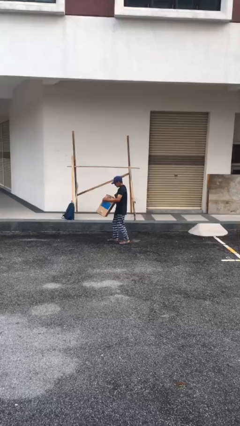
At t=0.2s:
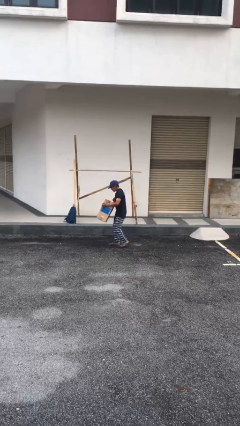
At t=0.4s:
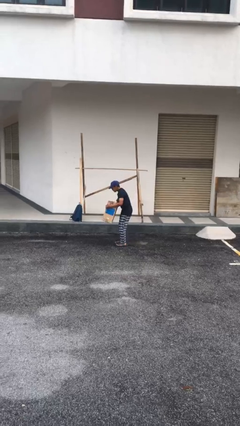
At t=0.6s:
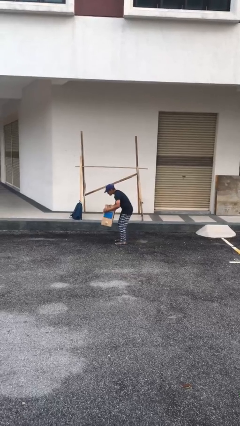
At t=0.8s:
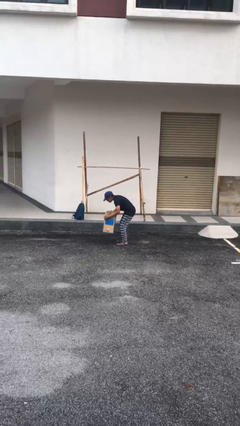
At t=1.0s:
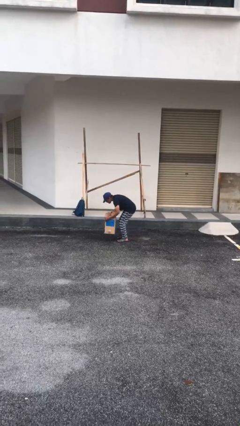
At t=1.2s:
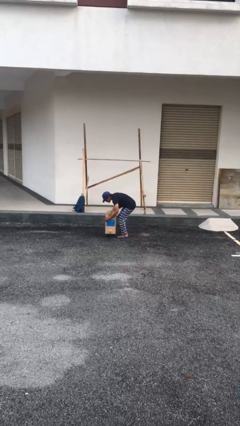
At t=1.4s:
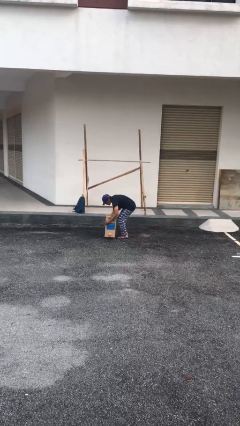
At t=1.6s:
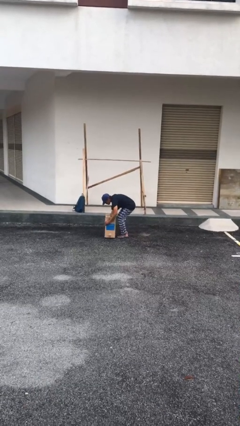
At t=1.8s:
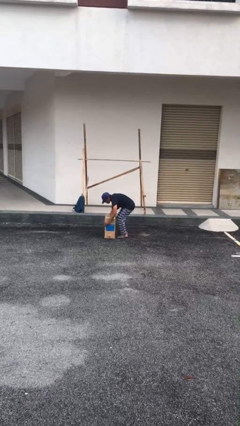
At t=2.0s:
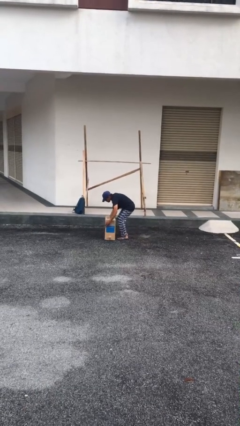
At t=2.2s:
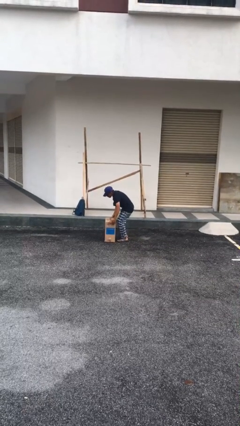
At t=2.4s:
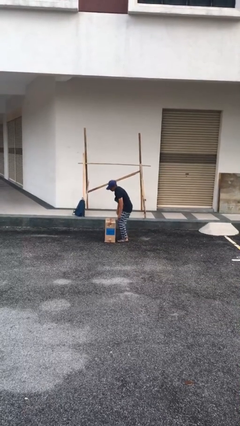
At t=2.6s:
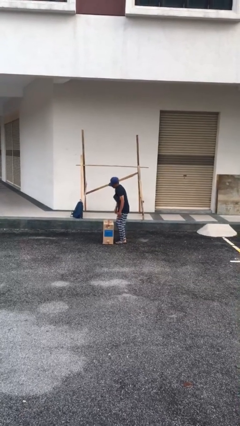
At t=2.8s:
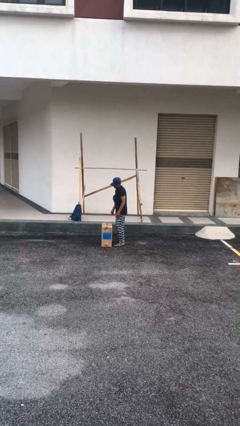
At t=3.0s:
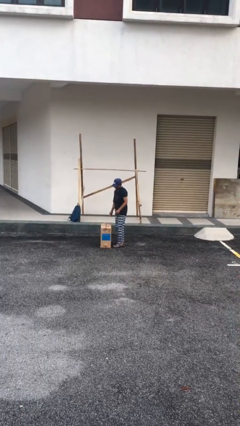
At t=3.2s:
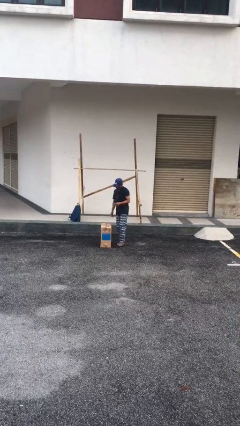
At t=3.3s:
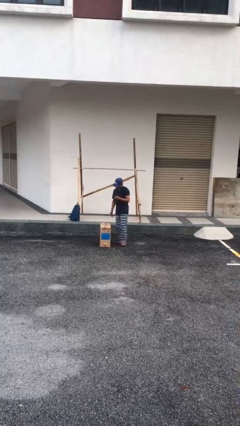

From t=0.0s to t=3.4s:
person puts down object on floor

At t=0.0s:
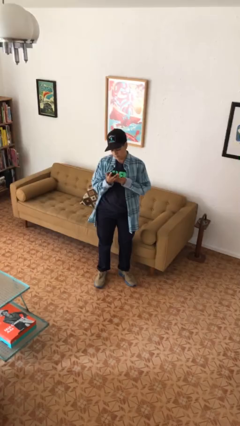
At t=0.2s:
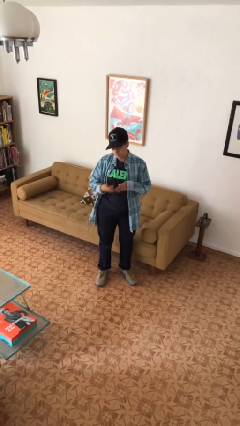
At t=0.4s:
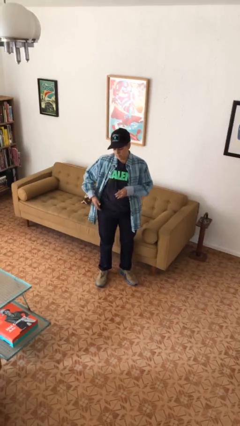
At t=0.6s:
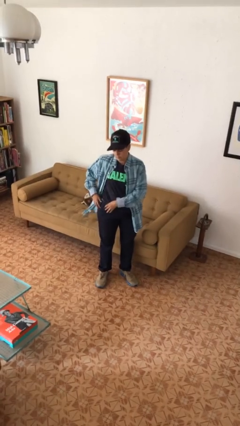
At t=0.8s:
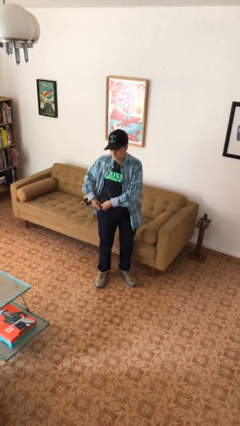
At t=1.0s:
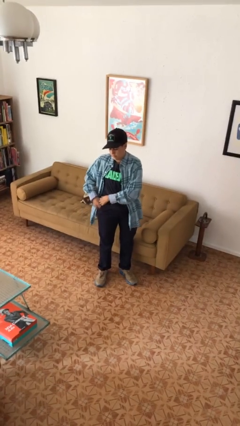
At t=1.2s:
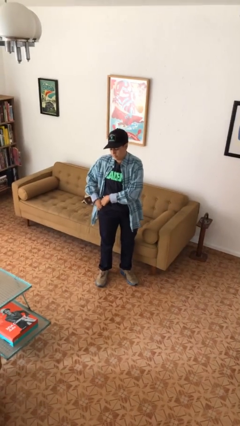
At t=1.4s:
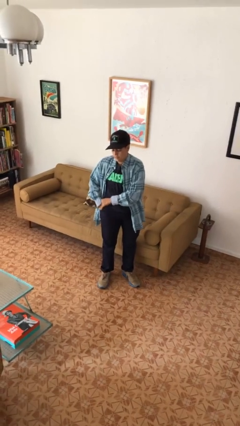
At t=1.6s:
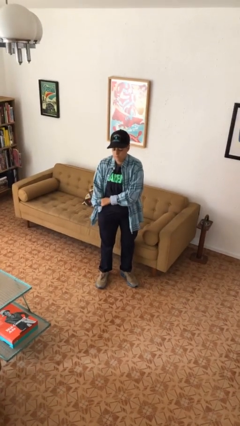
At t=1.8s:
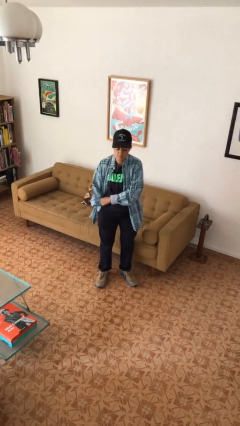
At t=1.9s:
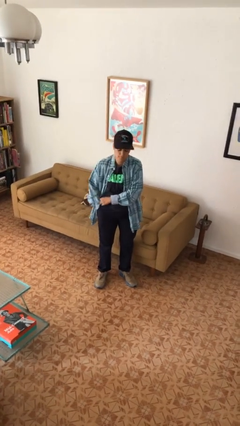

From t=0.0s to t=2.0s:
person puts phone into pocket

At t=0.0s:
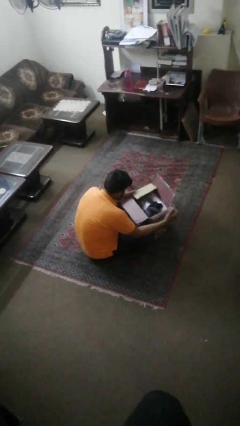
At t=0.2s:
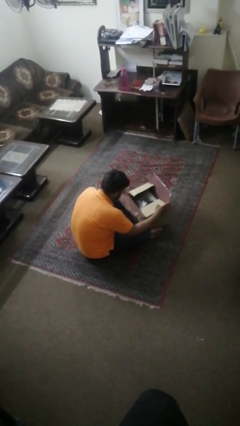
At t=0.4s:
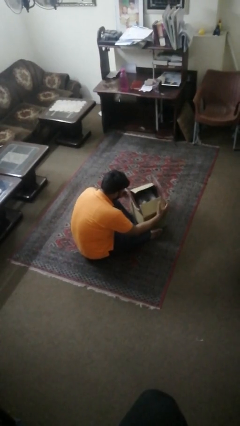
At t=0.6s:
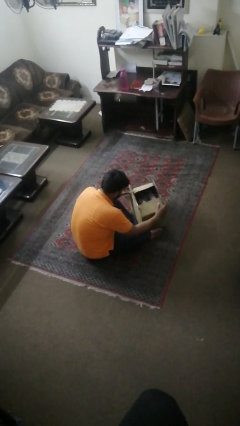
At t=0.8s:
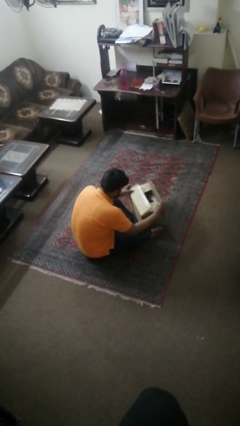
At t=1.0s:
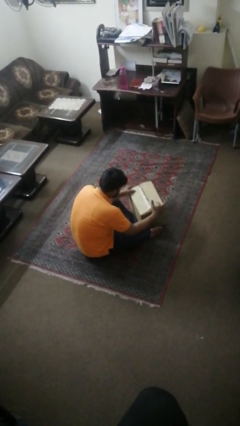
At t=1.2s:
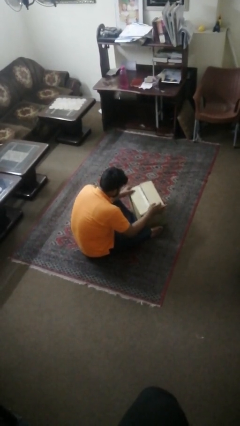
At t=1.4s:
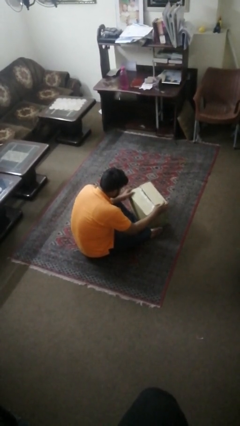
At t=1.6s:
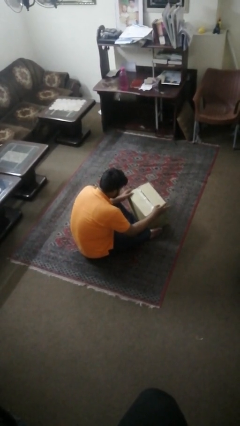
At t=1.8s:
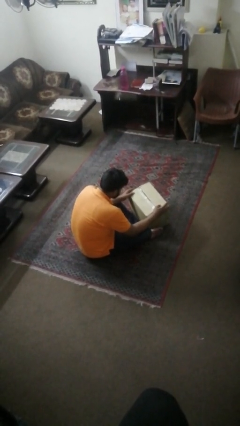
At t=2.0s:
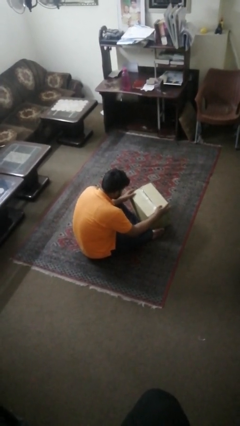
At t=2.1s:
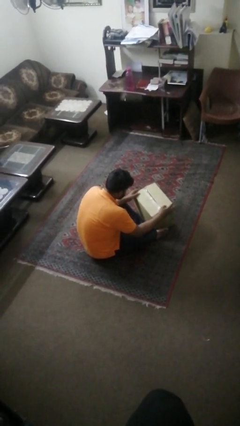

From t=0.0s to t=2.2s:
person closes box

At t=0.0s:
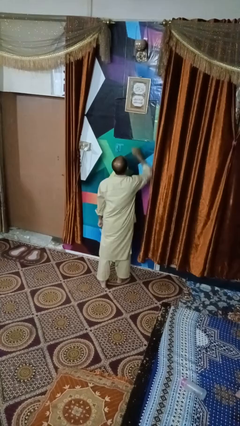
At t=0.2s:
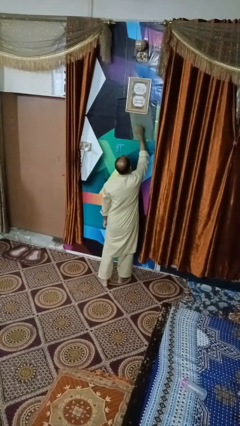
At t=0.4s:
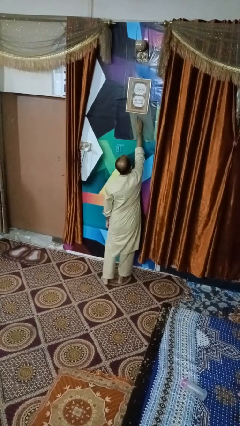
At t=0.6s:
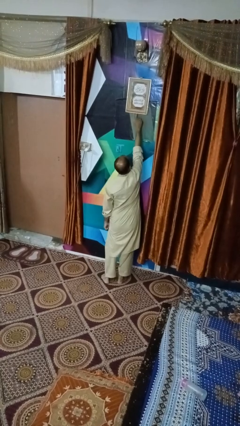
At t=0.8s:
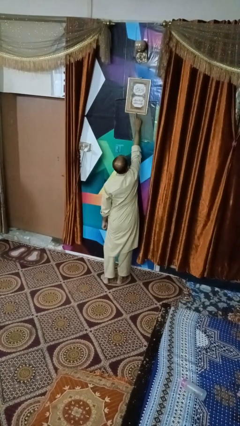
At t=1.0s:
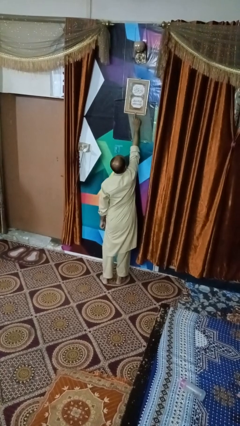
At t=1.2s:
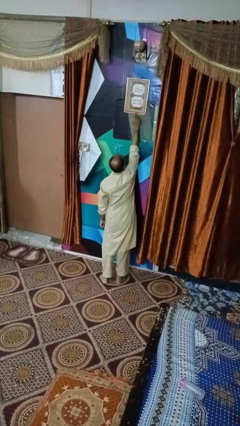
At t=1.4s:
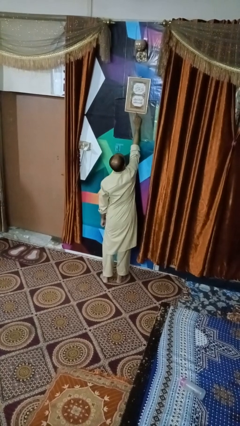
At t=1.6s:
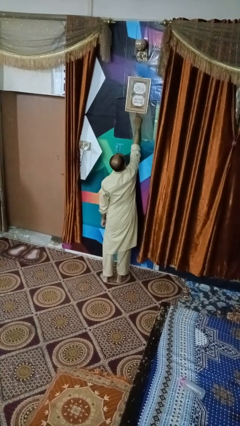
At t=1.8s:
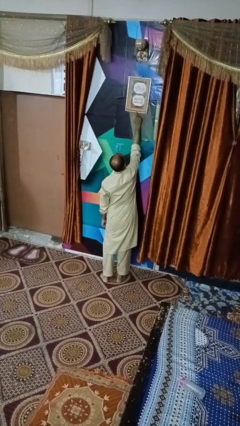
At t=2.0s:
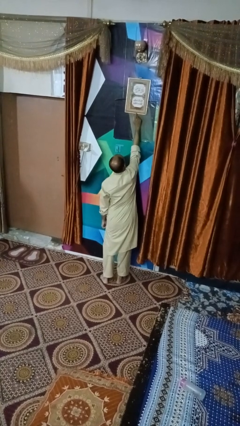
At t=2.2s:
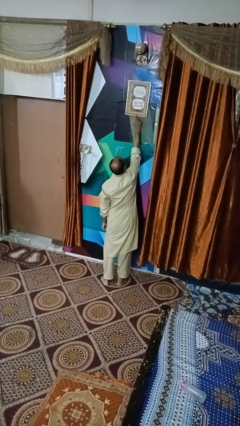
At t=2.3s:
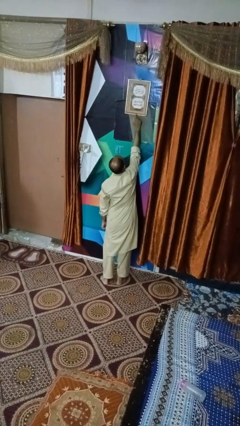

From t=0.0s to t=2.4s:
person taps object with finger

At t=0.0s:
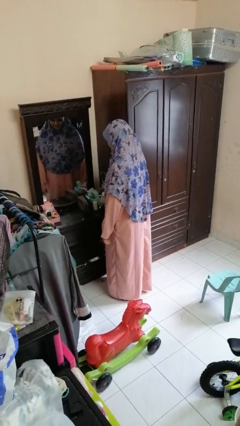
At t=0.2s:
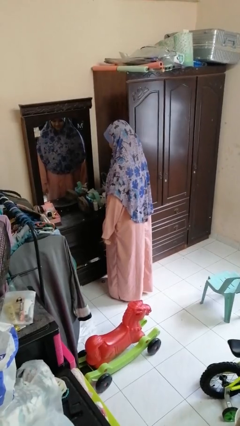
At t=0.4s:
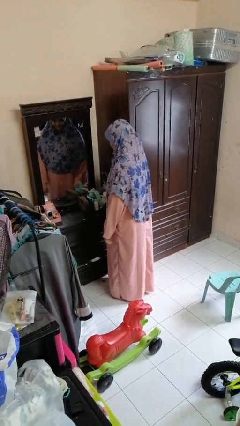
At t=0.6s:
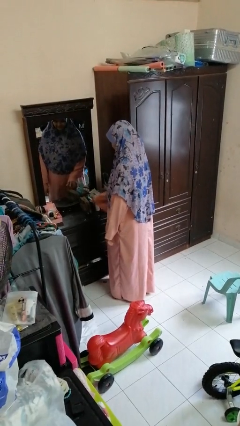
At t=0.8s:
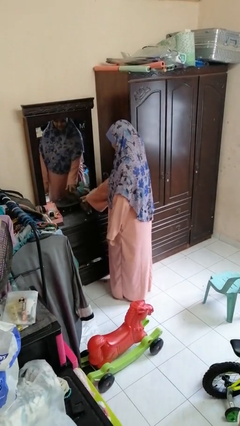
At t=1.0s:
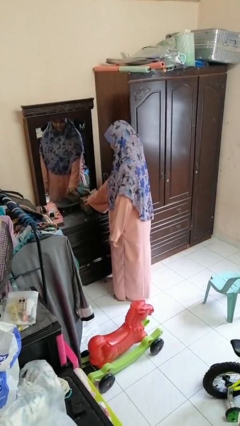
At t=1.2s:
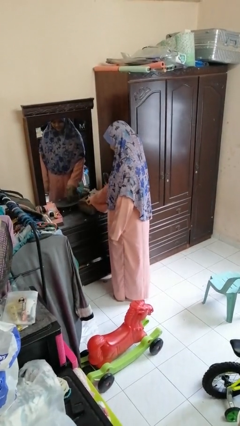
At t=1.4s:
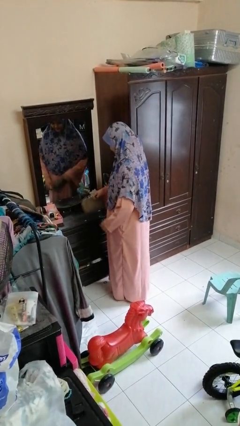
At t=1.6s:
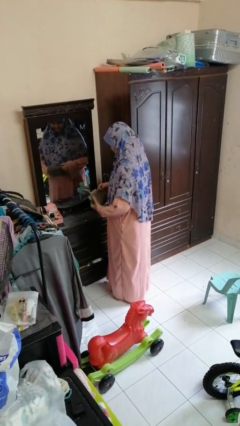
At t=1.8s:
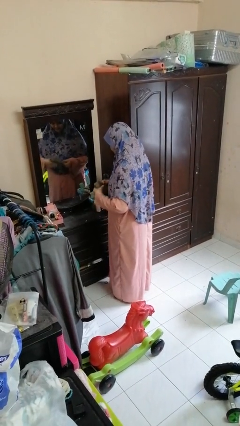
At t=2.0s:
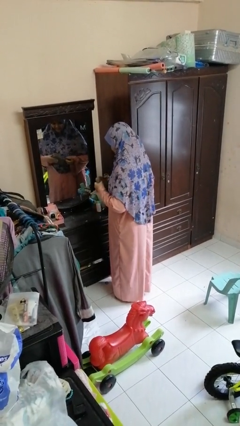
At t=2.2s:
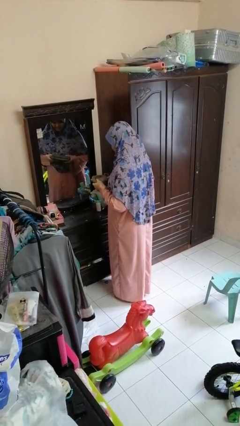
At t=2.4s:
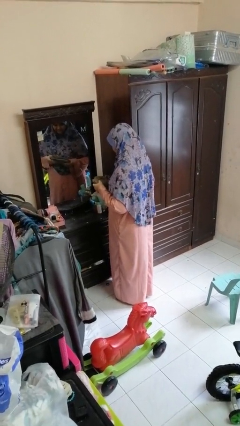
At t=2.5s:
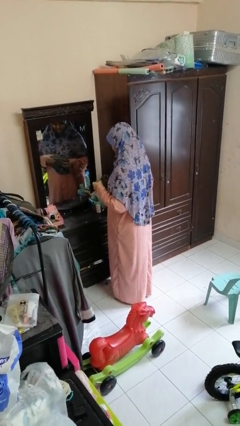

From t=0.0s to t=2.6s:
person picks up object from countertop

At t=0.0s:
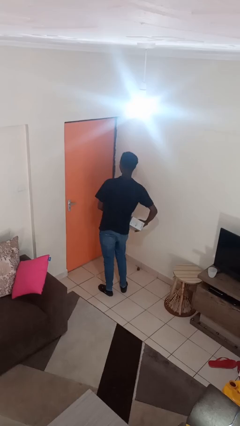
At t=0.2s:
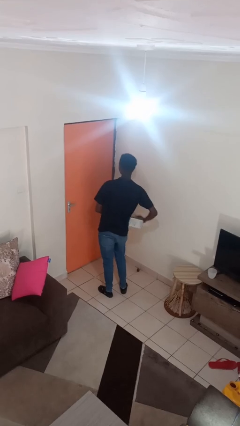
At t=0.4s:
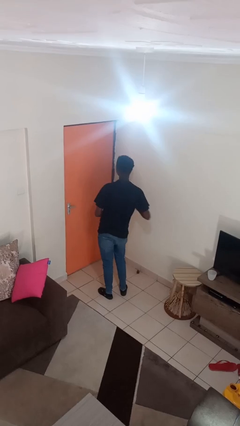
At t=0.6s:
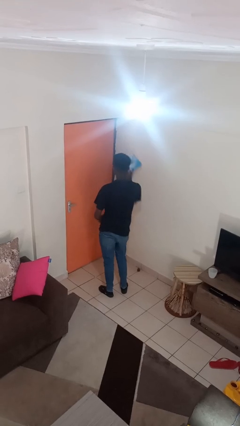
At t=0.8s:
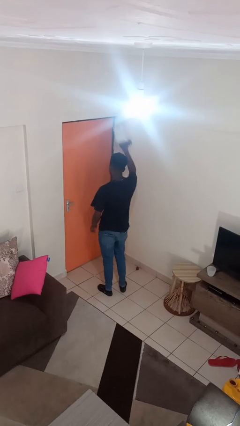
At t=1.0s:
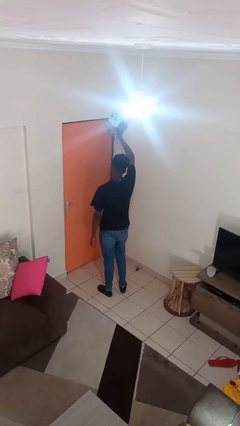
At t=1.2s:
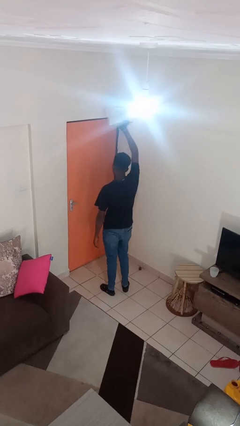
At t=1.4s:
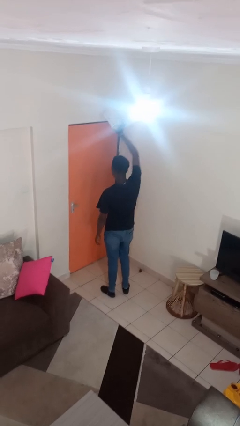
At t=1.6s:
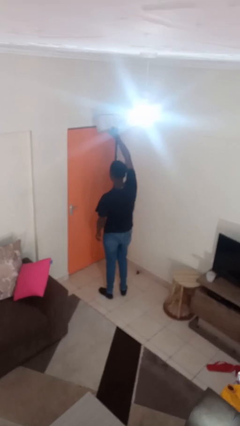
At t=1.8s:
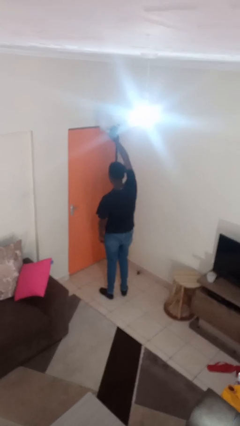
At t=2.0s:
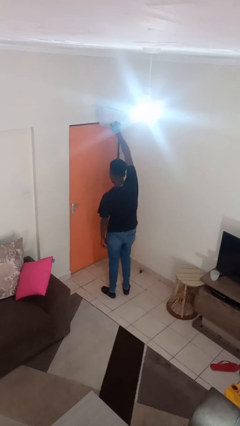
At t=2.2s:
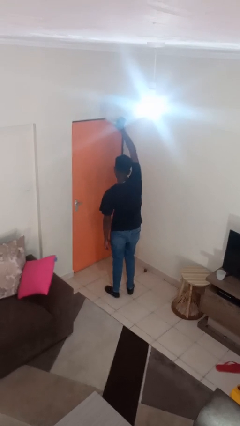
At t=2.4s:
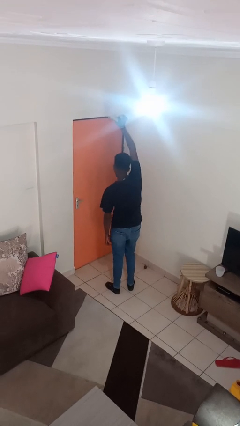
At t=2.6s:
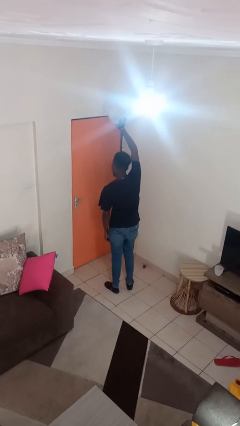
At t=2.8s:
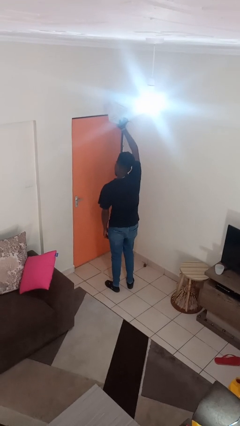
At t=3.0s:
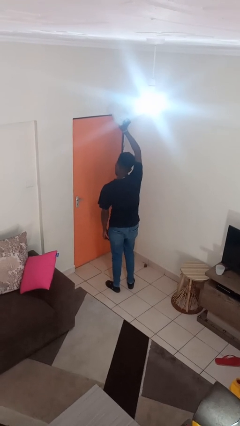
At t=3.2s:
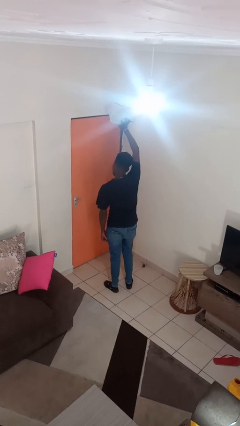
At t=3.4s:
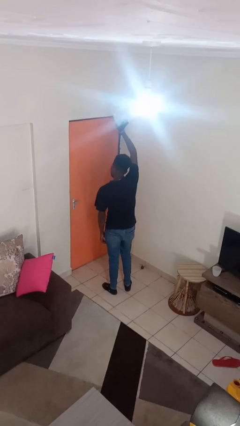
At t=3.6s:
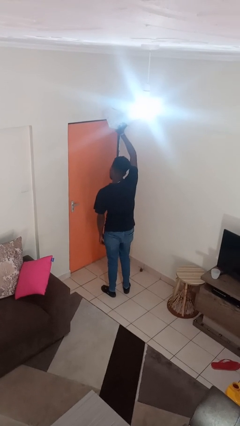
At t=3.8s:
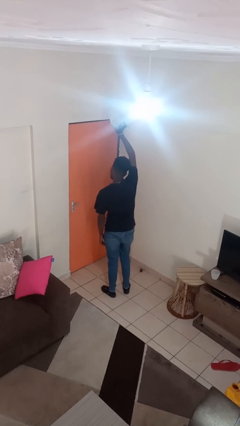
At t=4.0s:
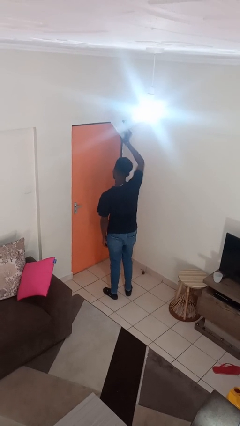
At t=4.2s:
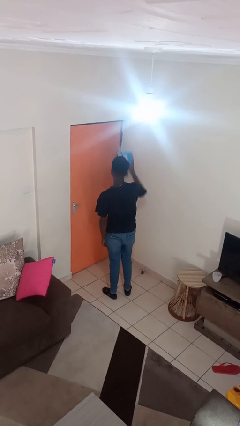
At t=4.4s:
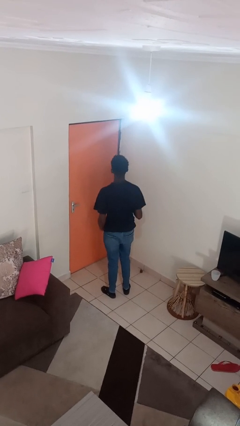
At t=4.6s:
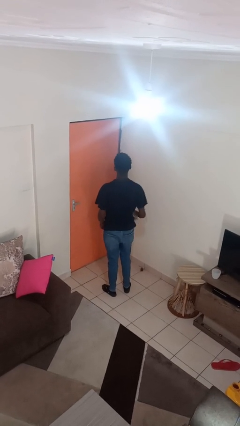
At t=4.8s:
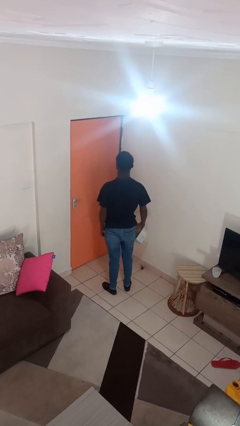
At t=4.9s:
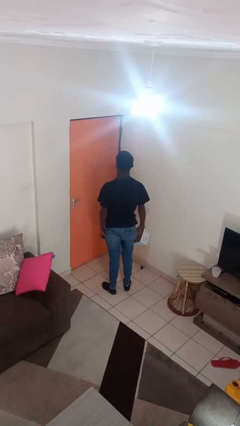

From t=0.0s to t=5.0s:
person holds object above head
